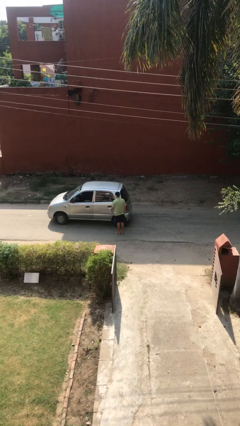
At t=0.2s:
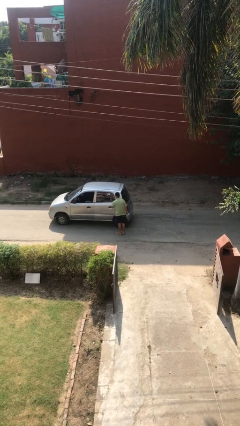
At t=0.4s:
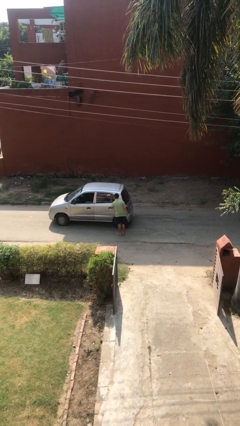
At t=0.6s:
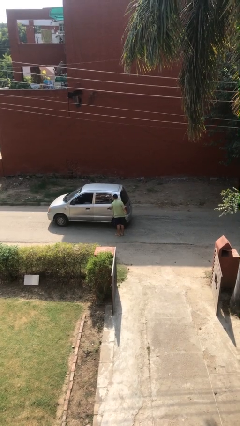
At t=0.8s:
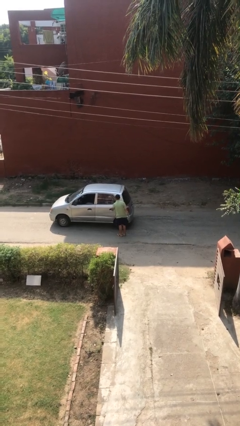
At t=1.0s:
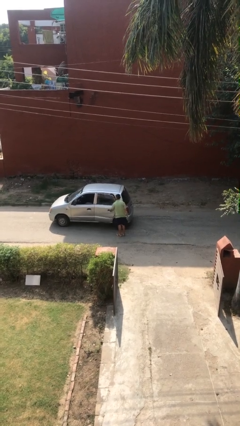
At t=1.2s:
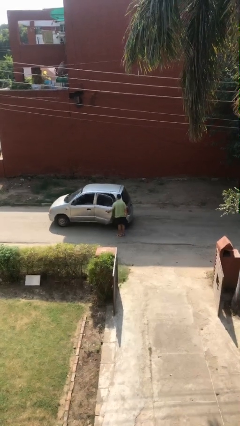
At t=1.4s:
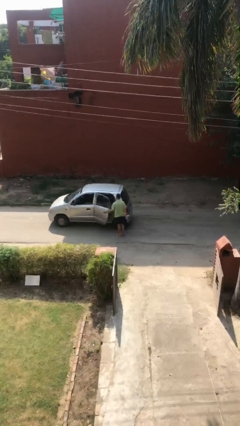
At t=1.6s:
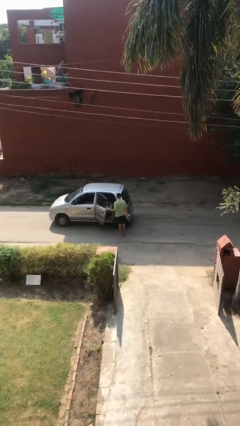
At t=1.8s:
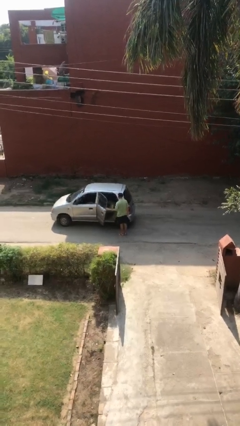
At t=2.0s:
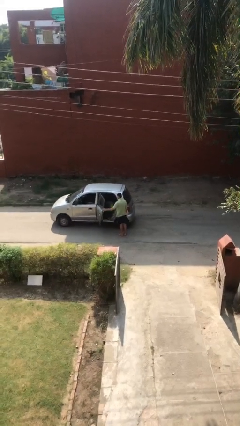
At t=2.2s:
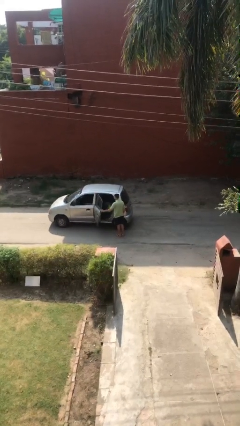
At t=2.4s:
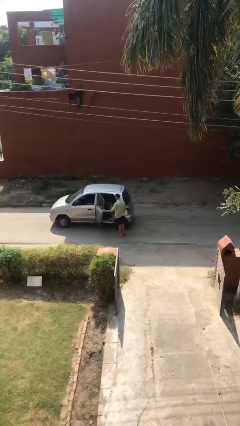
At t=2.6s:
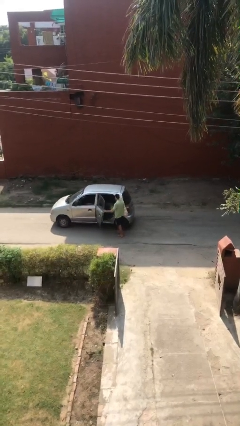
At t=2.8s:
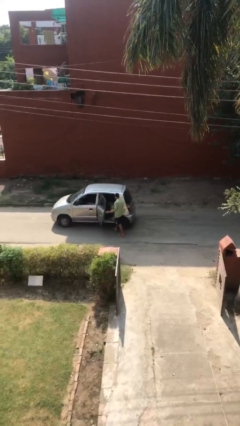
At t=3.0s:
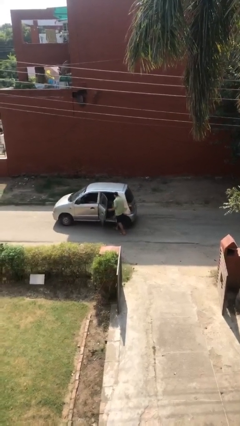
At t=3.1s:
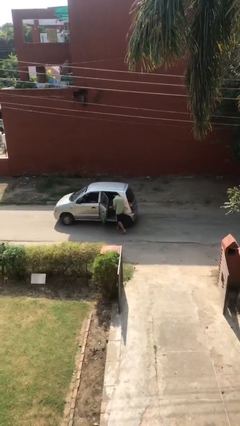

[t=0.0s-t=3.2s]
person opens car door

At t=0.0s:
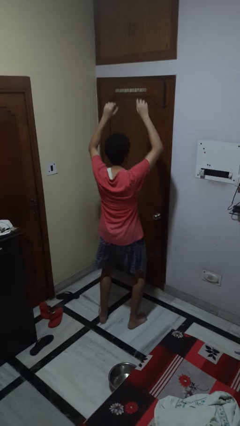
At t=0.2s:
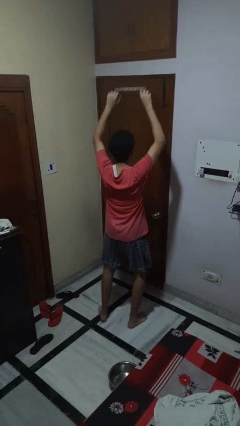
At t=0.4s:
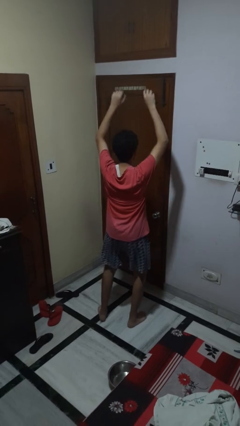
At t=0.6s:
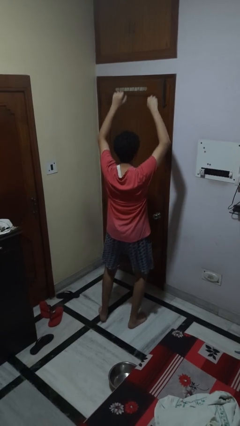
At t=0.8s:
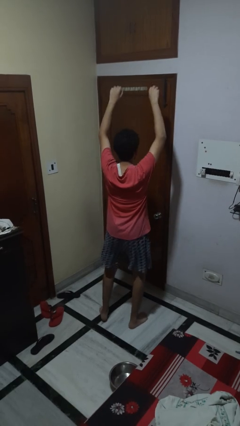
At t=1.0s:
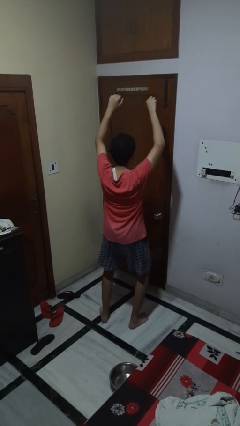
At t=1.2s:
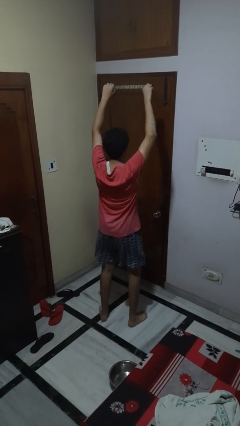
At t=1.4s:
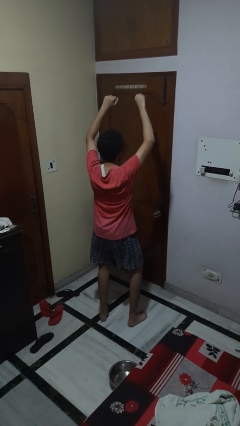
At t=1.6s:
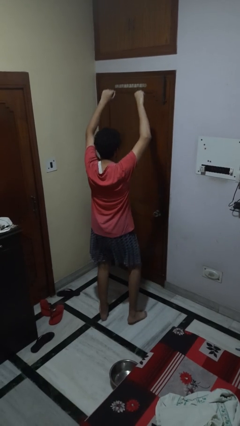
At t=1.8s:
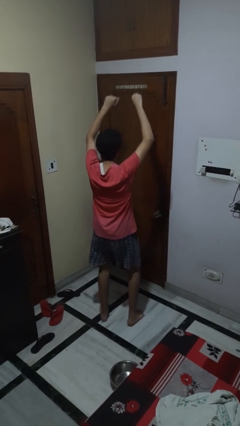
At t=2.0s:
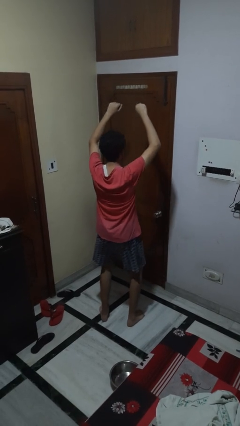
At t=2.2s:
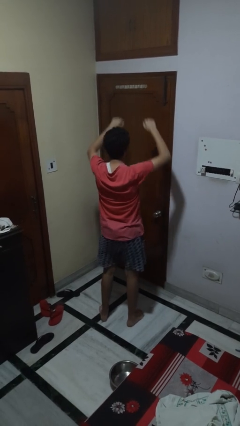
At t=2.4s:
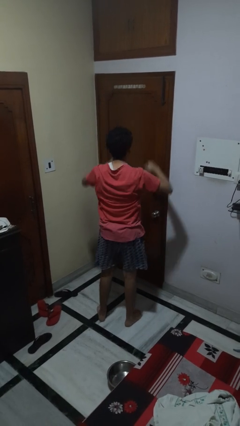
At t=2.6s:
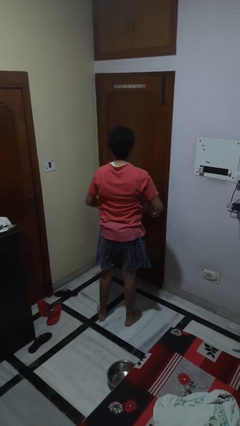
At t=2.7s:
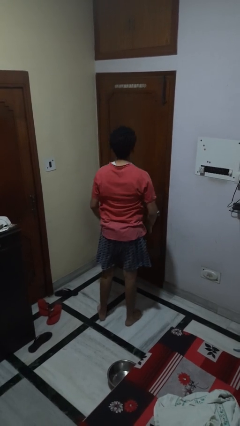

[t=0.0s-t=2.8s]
person dances in place

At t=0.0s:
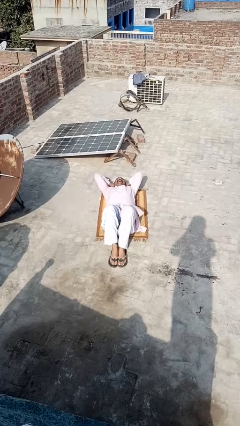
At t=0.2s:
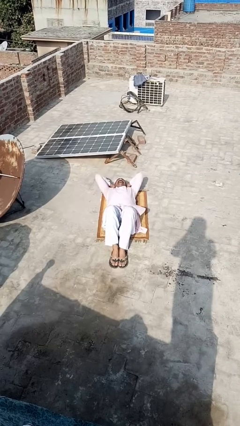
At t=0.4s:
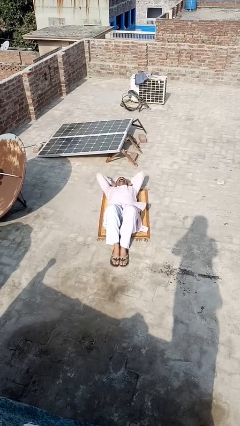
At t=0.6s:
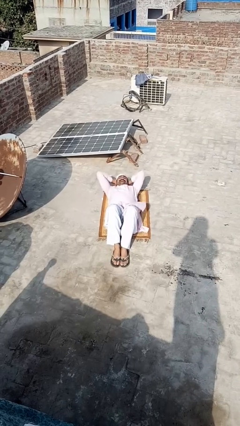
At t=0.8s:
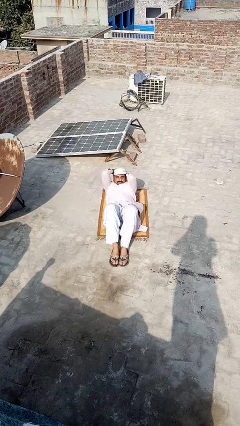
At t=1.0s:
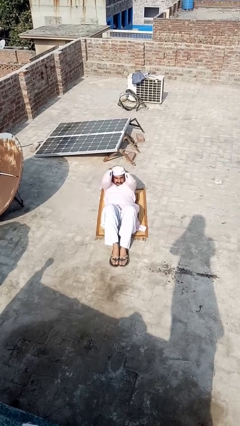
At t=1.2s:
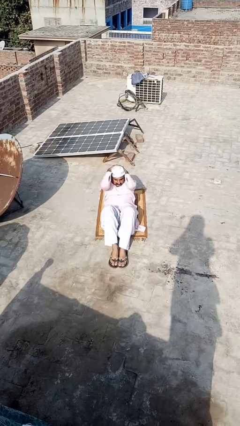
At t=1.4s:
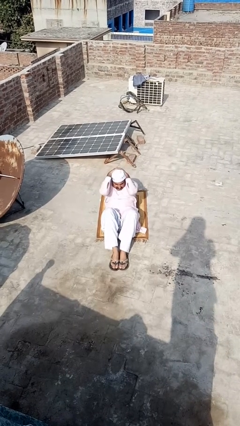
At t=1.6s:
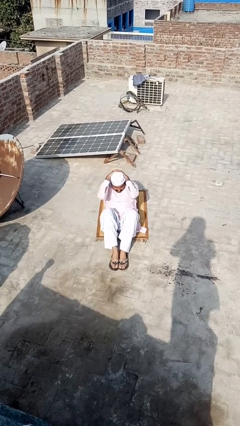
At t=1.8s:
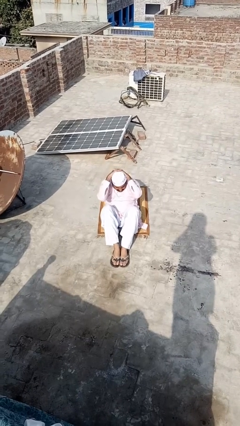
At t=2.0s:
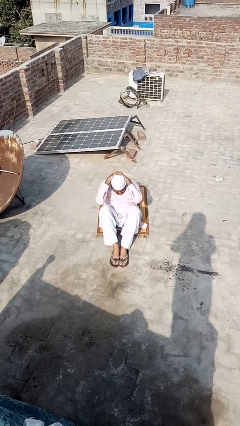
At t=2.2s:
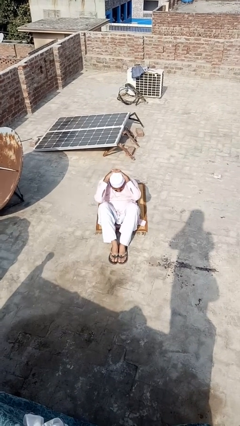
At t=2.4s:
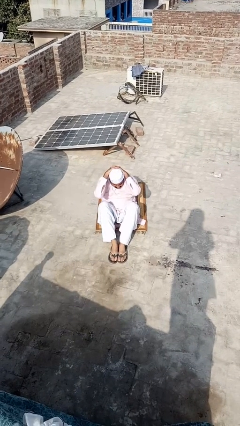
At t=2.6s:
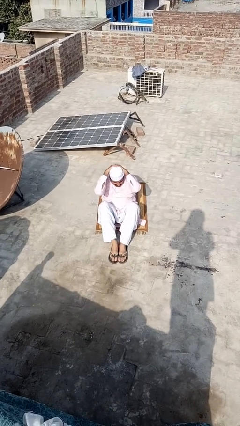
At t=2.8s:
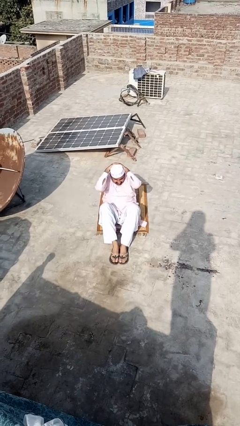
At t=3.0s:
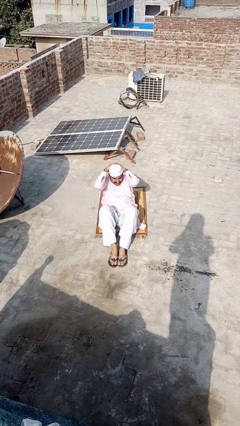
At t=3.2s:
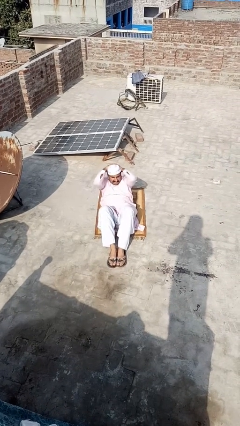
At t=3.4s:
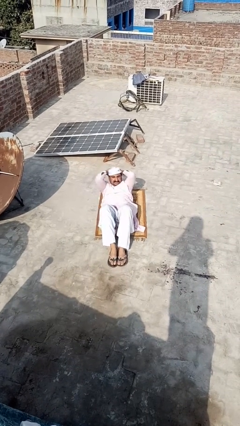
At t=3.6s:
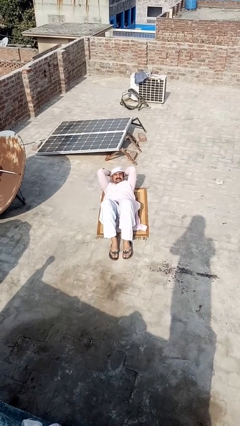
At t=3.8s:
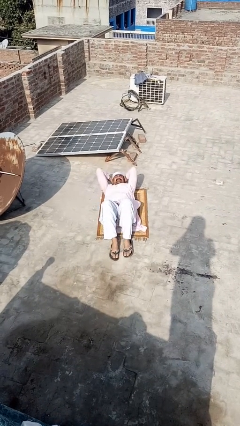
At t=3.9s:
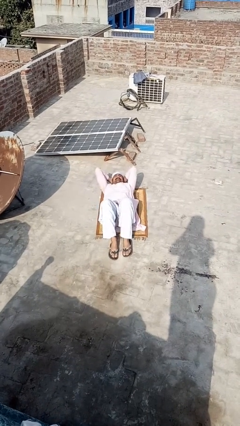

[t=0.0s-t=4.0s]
person exercises with situp

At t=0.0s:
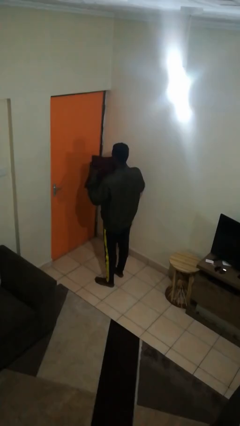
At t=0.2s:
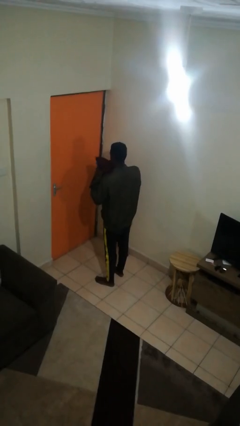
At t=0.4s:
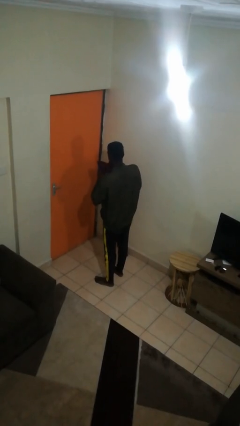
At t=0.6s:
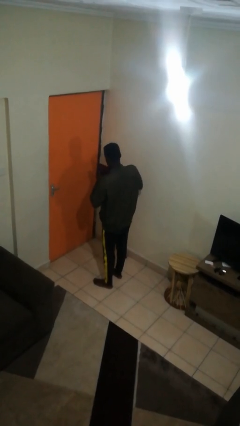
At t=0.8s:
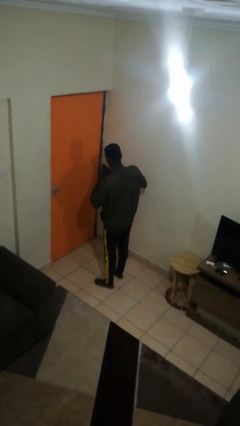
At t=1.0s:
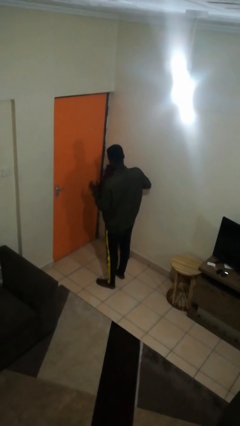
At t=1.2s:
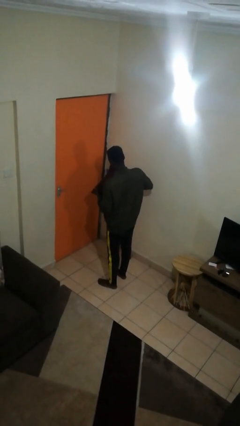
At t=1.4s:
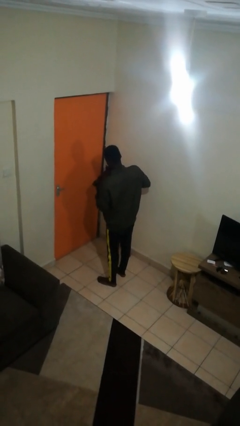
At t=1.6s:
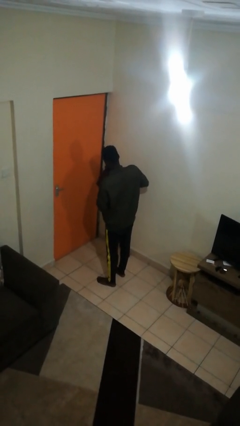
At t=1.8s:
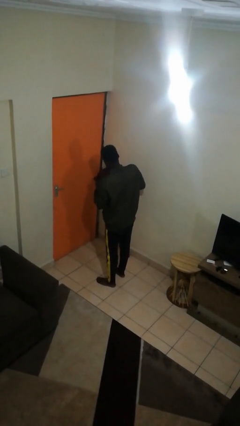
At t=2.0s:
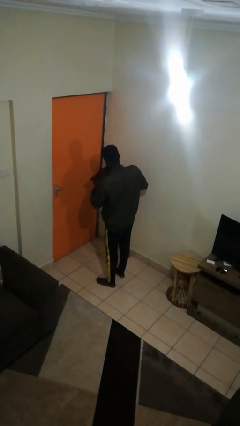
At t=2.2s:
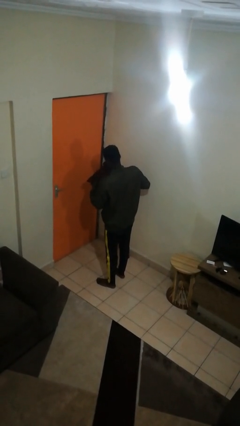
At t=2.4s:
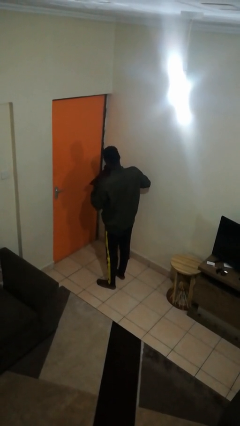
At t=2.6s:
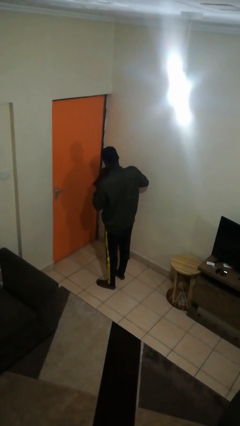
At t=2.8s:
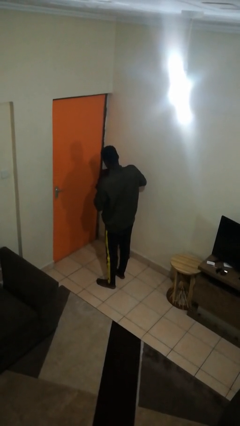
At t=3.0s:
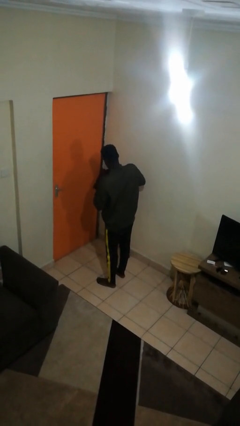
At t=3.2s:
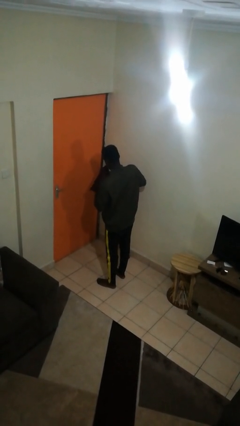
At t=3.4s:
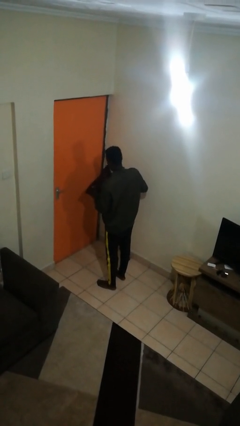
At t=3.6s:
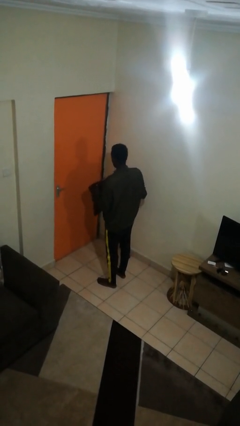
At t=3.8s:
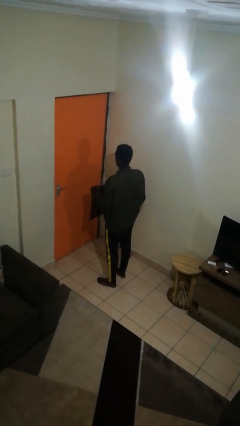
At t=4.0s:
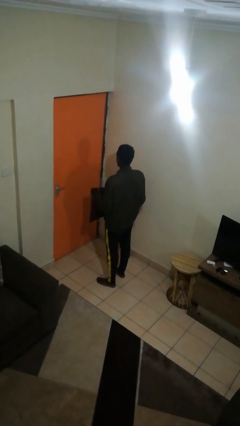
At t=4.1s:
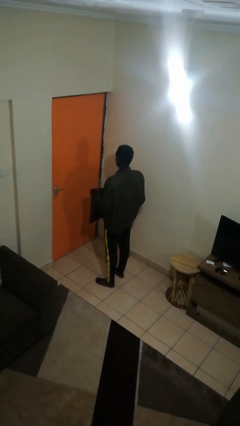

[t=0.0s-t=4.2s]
person squeezes object

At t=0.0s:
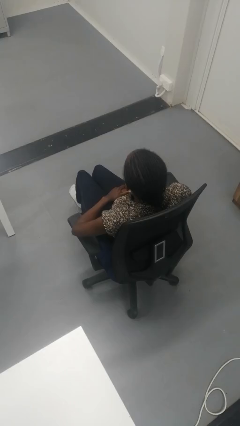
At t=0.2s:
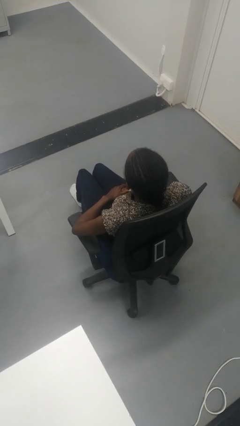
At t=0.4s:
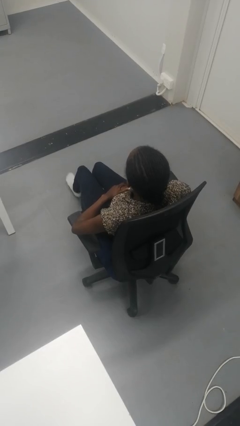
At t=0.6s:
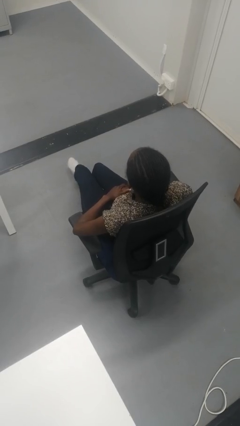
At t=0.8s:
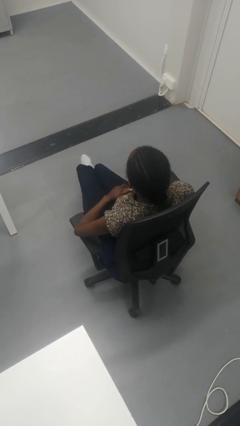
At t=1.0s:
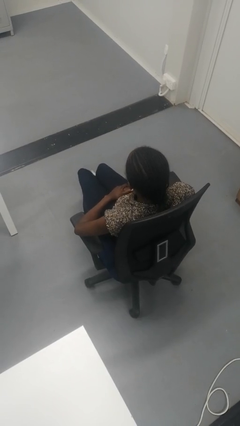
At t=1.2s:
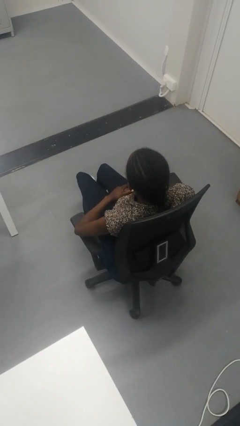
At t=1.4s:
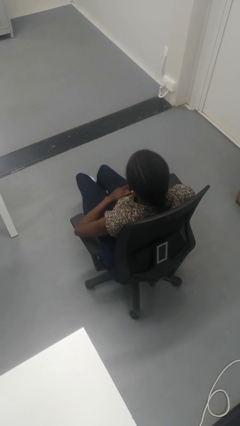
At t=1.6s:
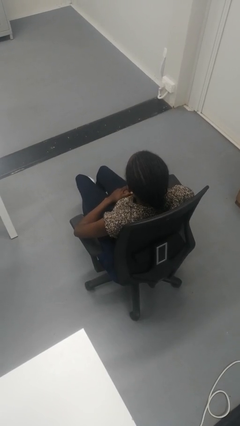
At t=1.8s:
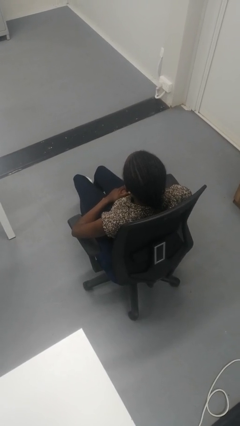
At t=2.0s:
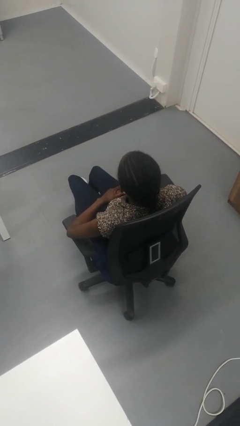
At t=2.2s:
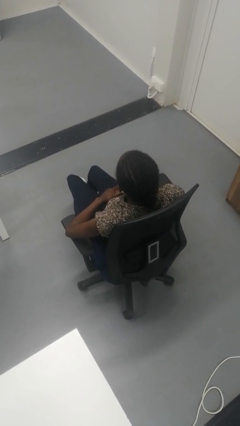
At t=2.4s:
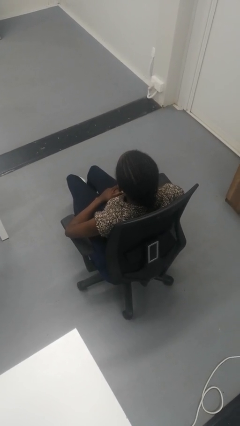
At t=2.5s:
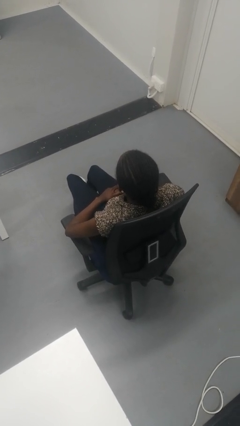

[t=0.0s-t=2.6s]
person crosses legs

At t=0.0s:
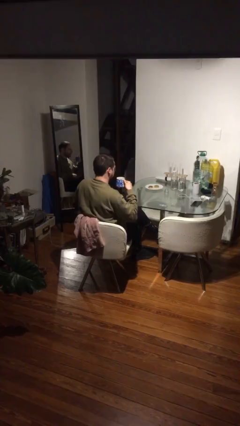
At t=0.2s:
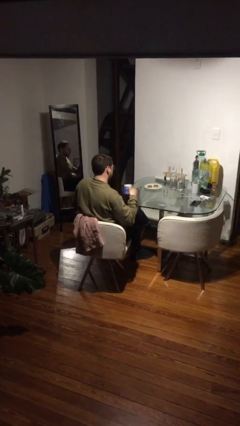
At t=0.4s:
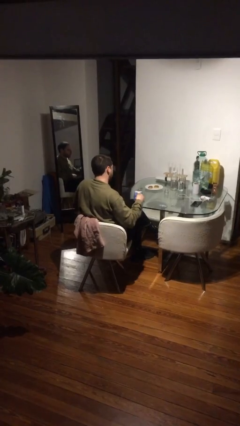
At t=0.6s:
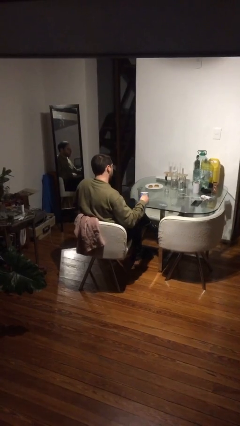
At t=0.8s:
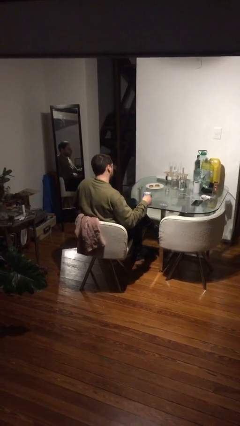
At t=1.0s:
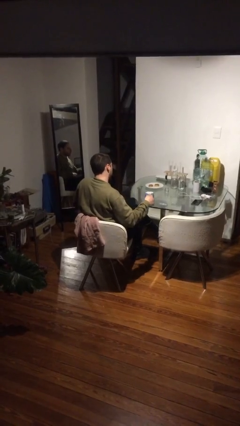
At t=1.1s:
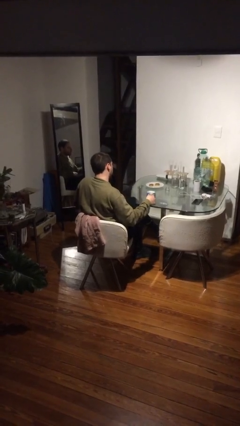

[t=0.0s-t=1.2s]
person puts down object on table
